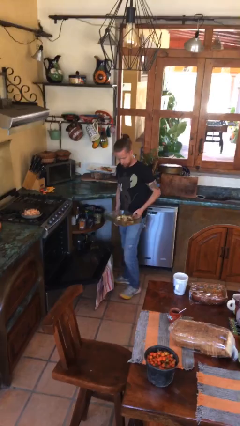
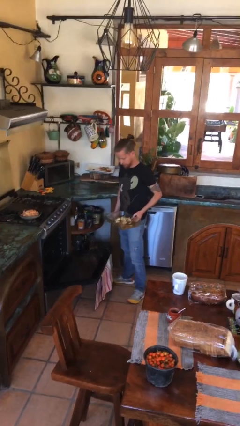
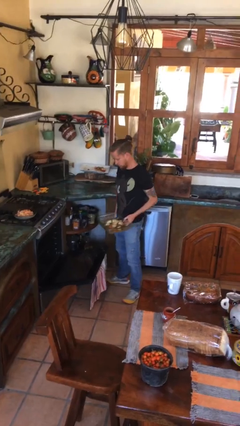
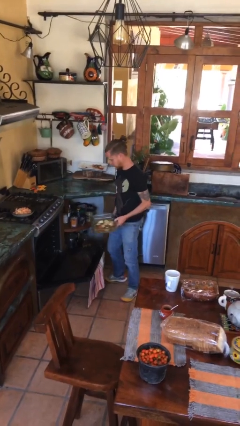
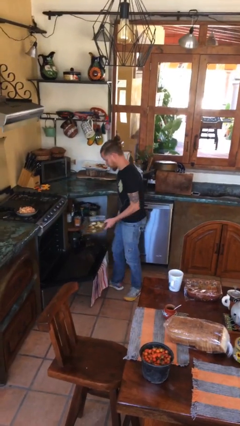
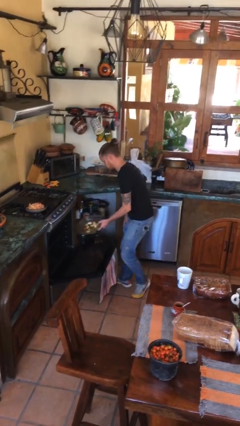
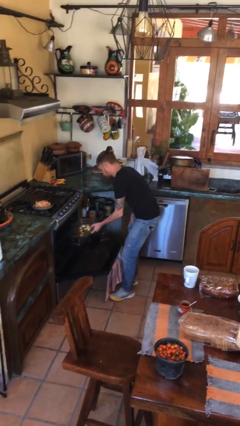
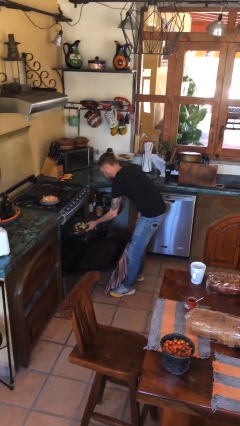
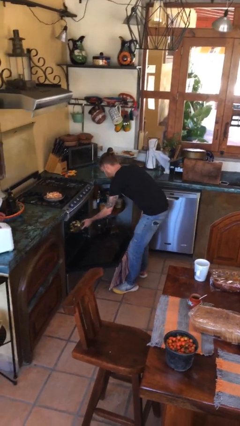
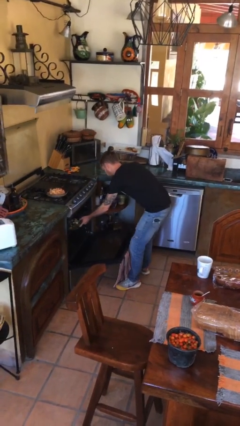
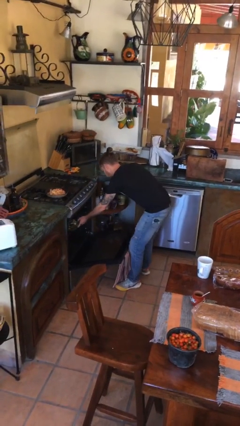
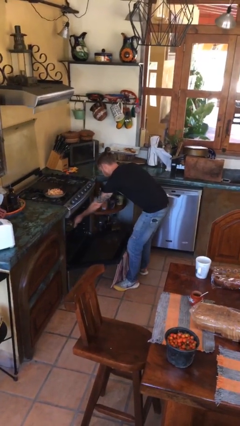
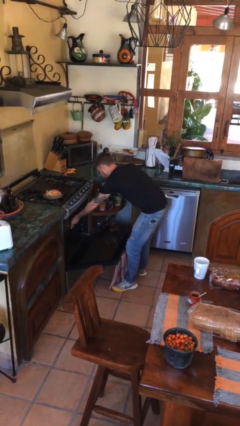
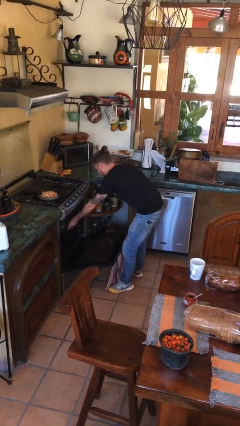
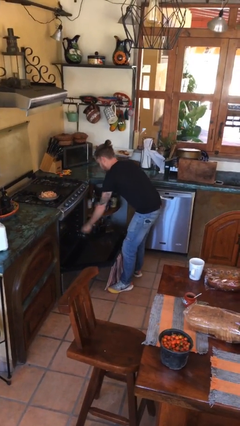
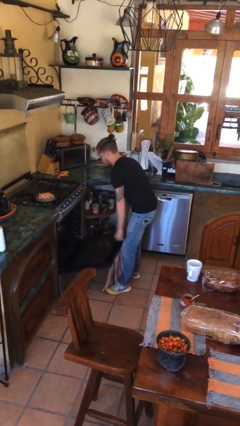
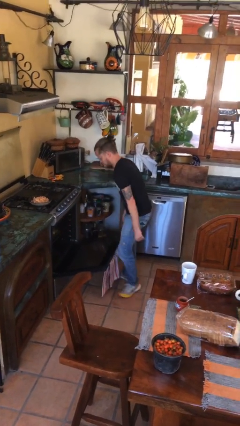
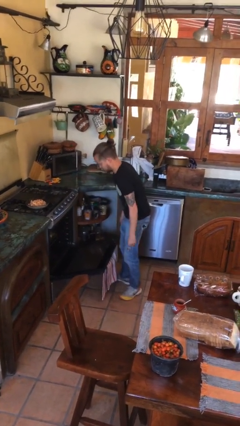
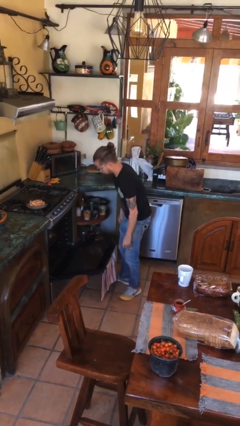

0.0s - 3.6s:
person puts object into oven

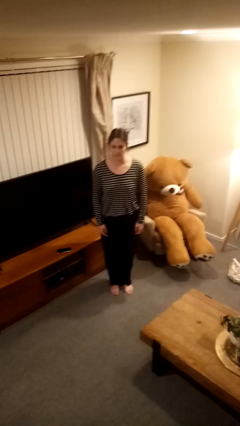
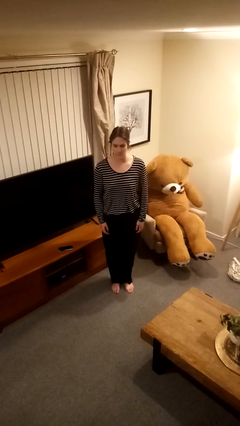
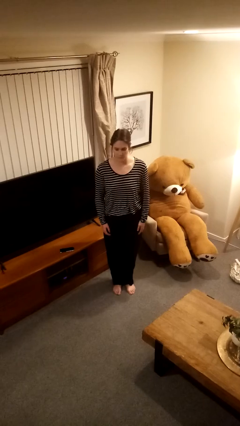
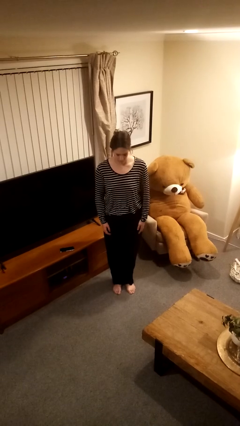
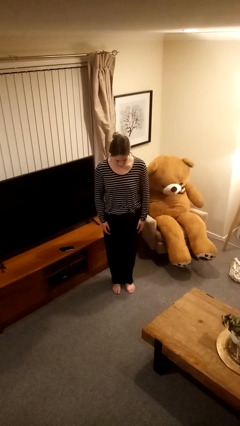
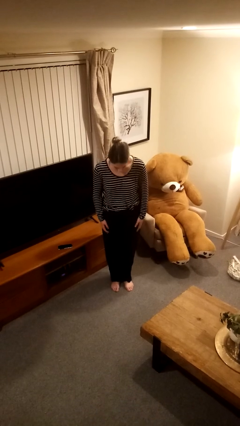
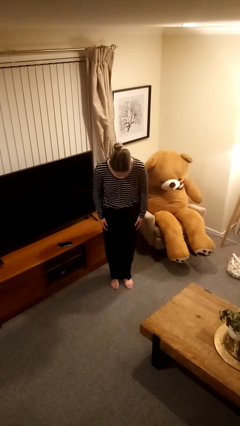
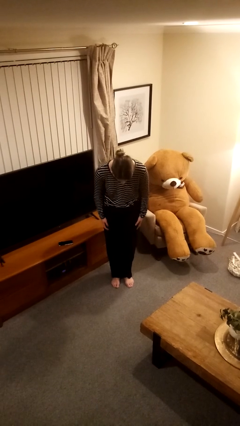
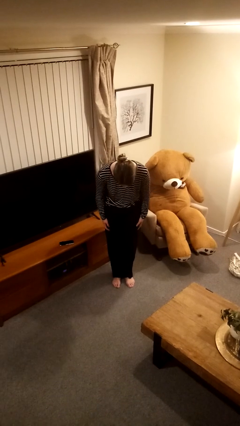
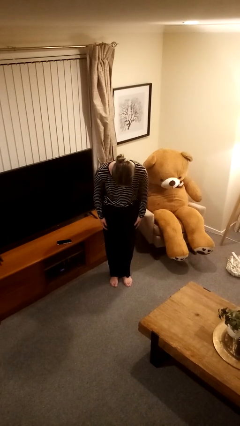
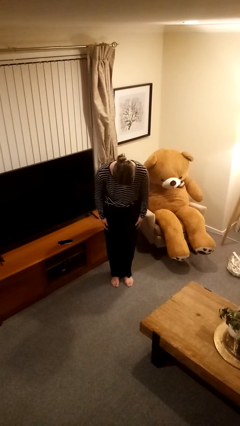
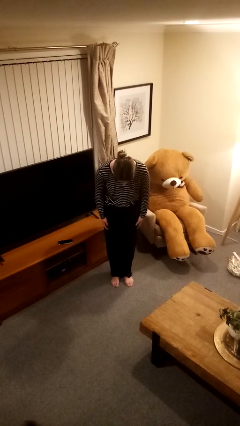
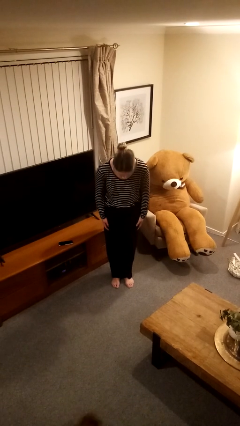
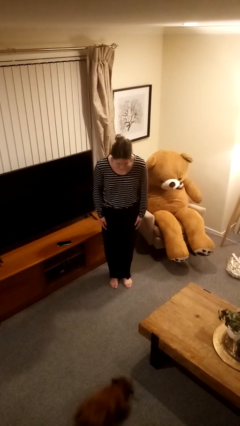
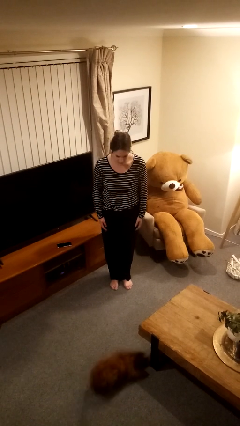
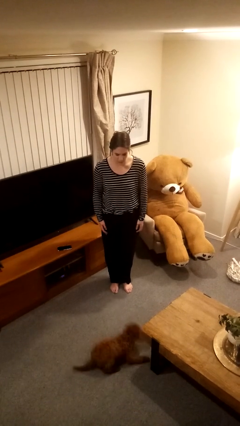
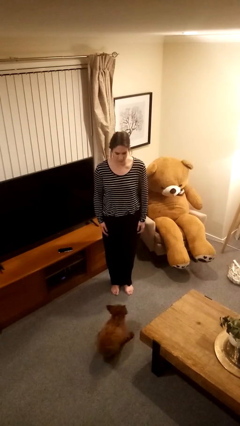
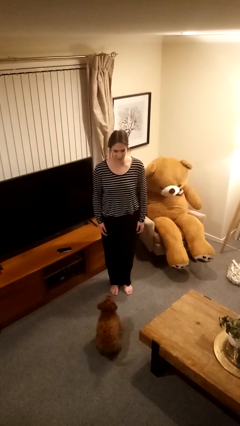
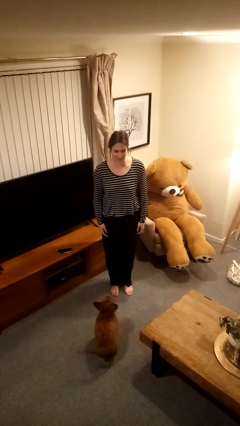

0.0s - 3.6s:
person bows

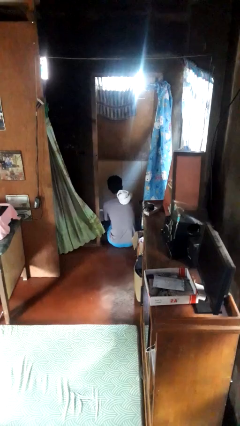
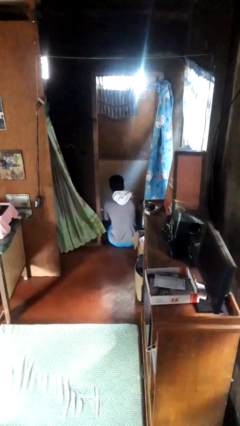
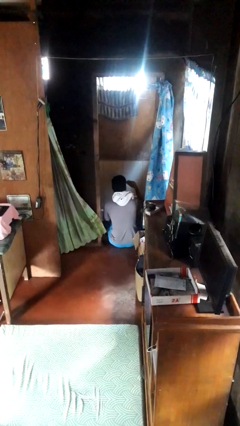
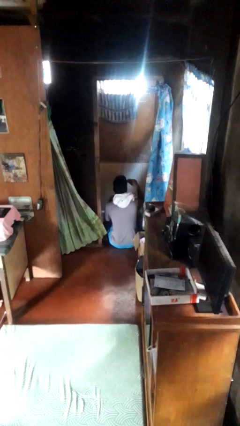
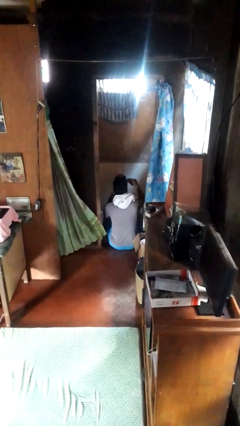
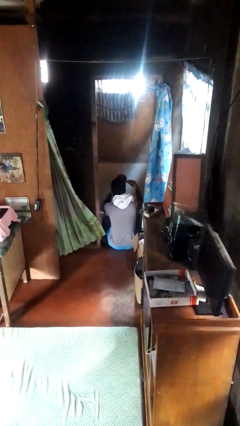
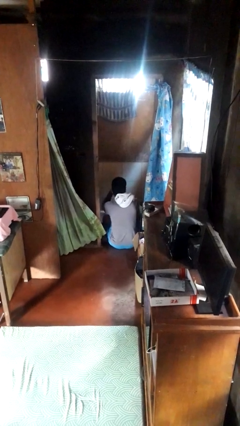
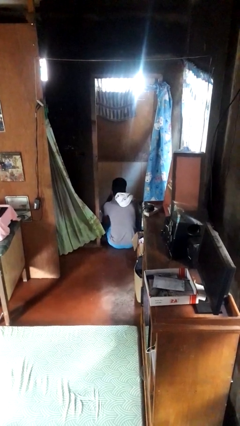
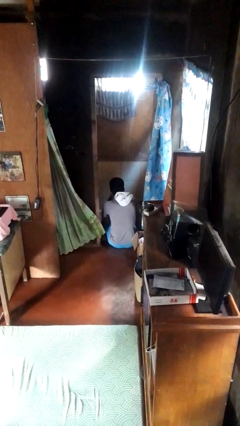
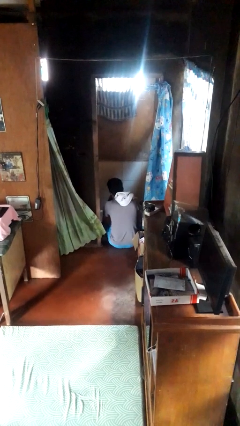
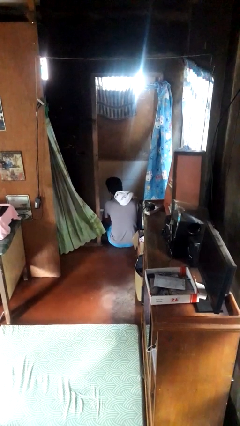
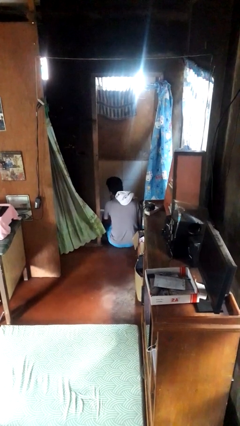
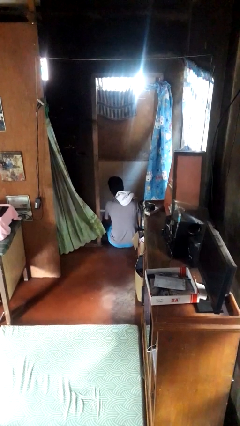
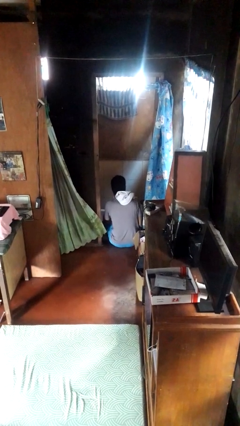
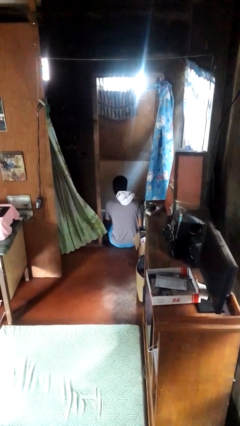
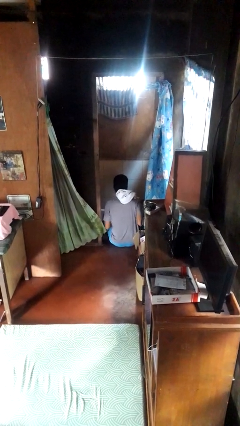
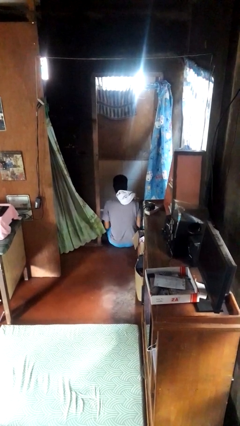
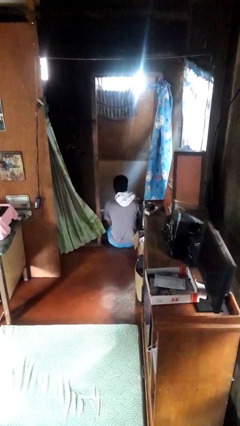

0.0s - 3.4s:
person washes face

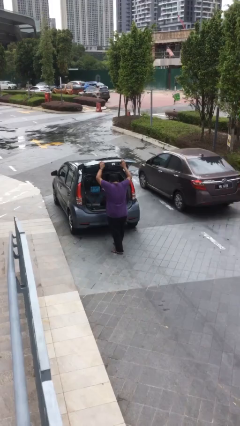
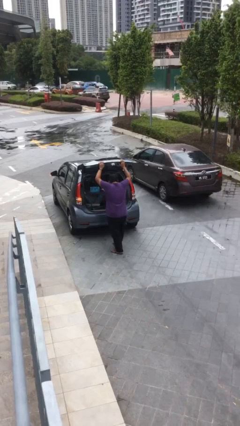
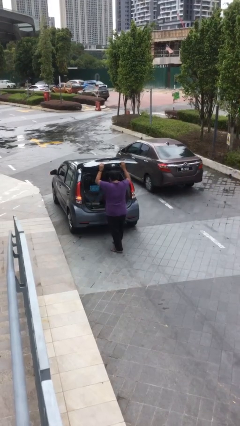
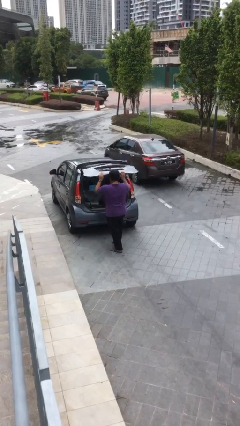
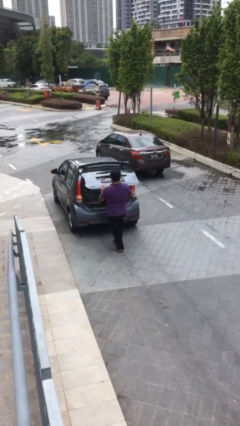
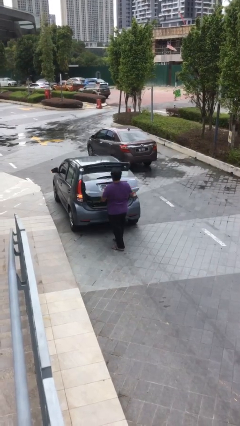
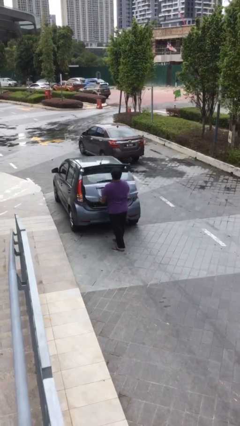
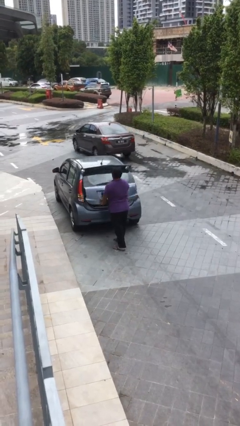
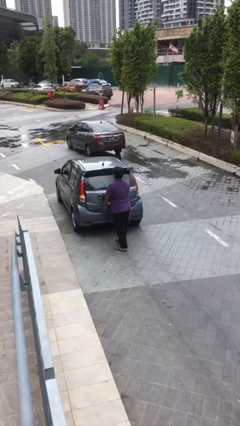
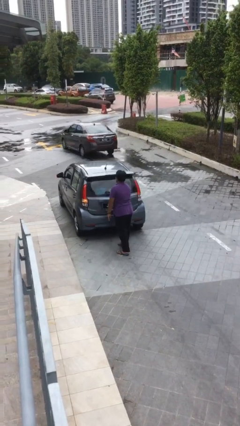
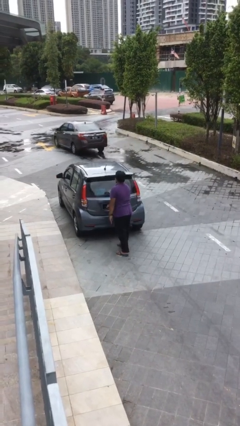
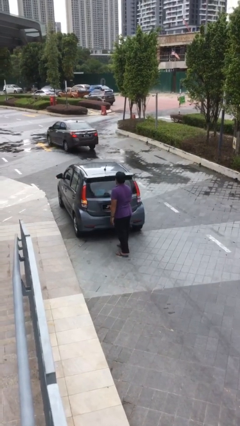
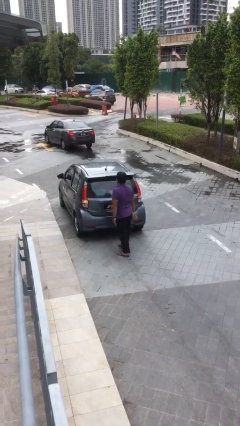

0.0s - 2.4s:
person closes car trunk

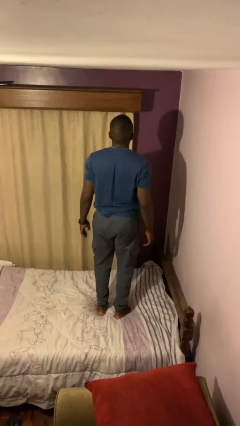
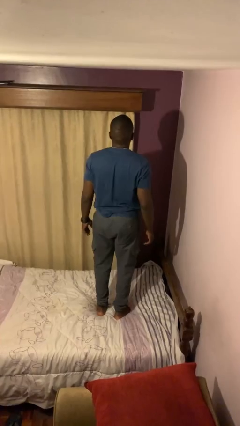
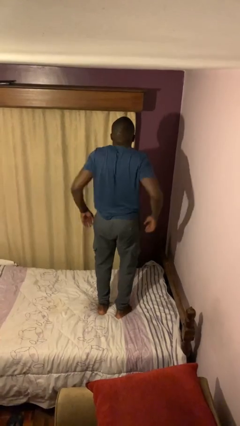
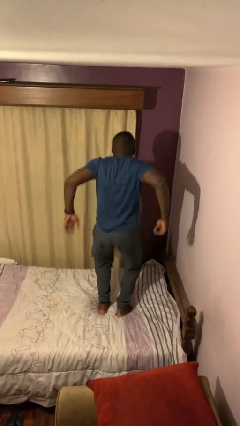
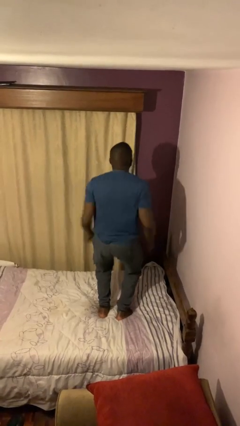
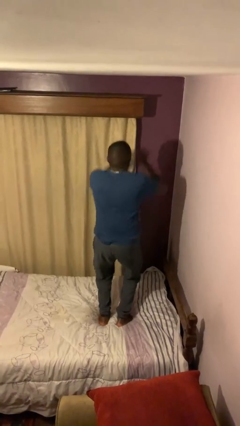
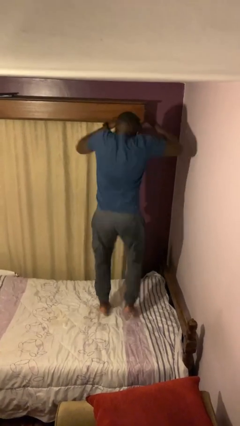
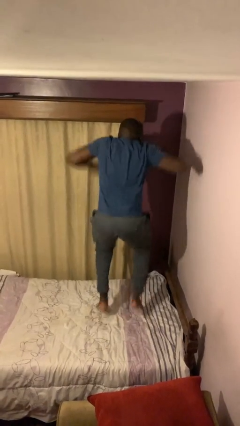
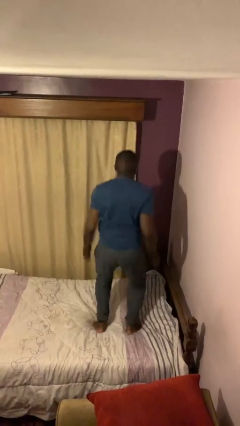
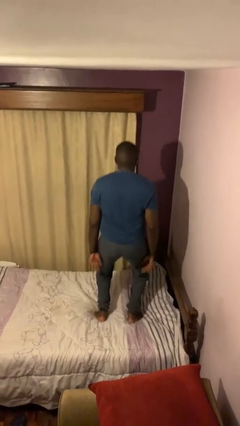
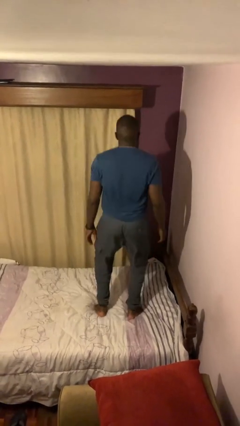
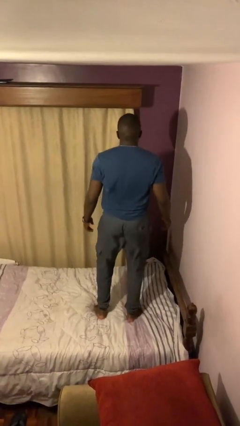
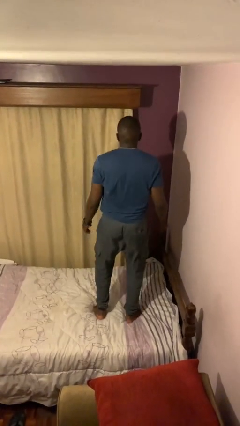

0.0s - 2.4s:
person jumps on bed

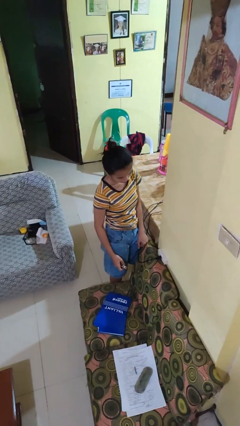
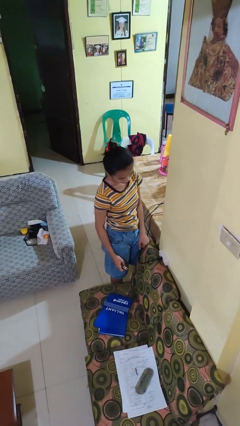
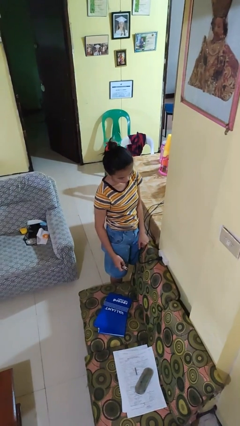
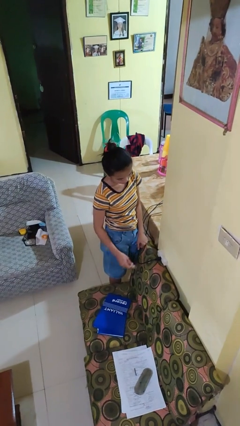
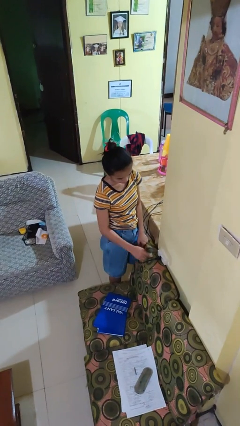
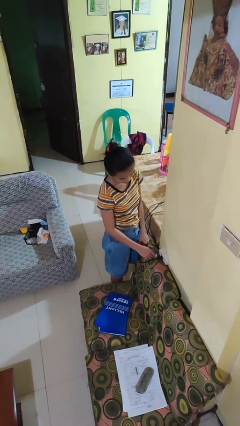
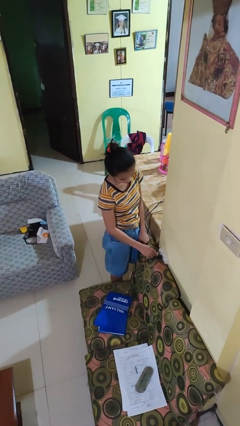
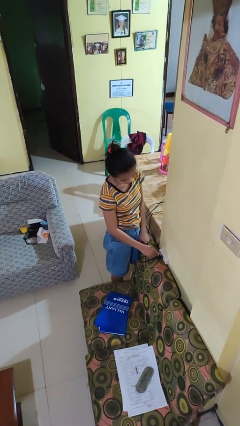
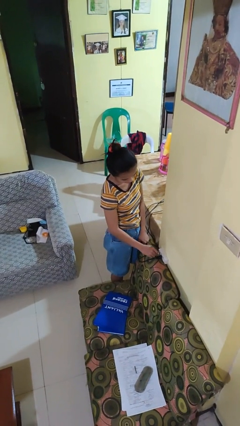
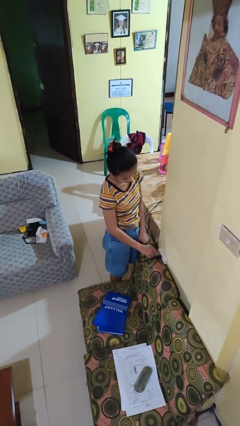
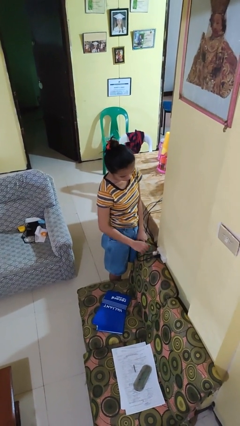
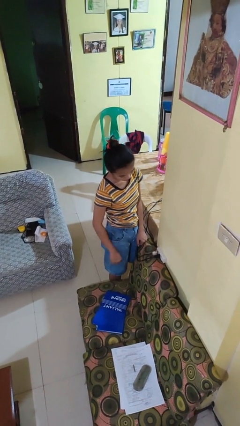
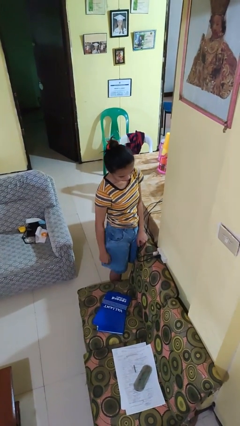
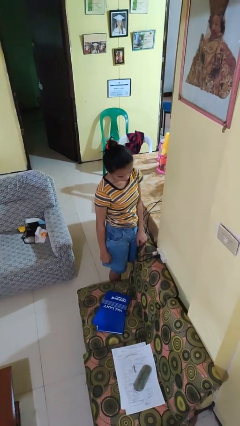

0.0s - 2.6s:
person plugs into electrical socket
